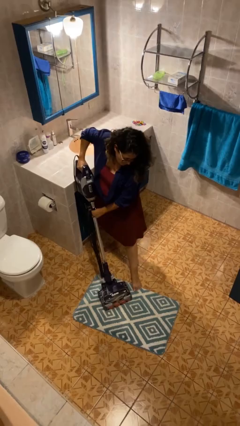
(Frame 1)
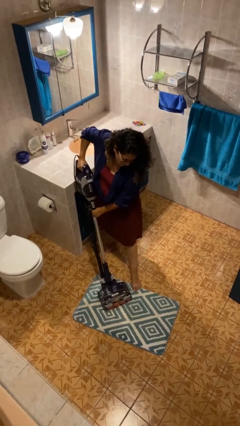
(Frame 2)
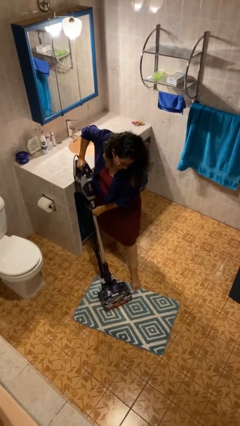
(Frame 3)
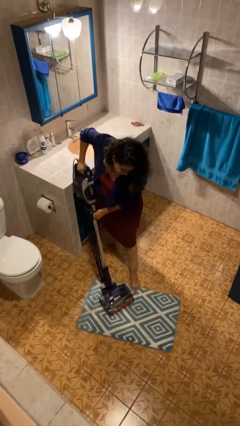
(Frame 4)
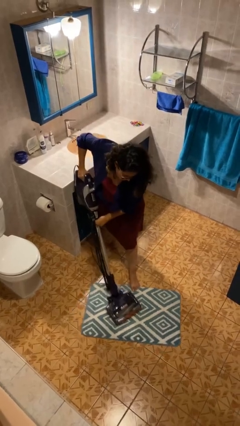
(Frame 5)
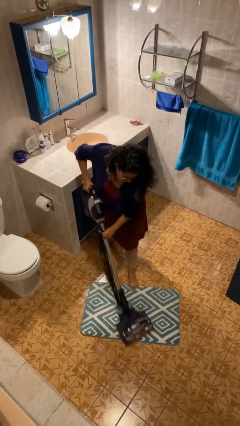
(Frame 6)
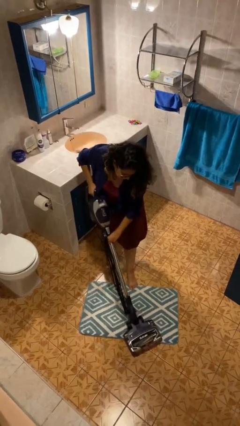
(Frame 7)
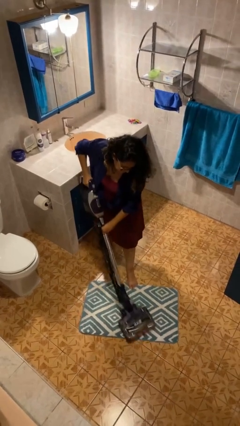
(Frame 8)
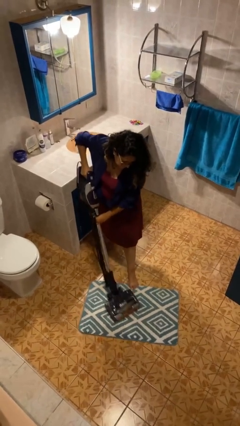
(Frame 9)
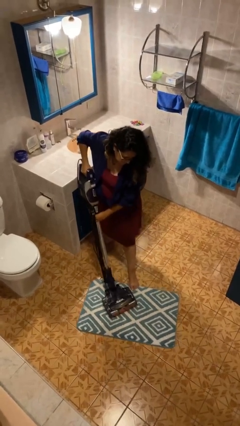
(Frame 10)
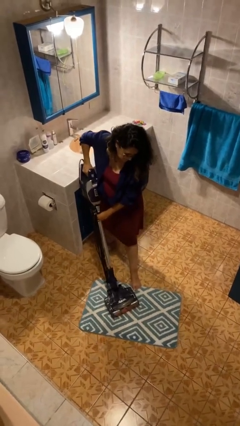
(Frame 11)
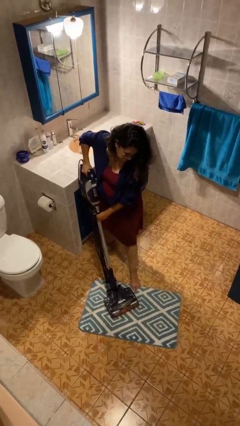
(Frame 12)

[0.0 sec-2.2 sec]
person vacuums carpet

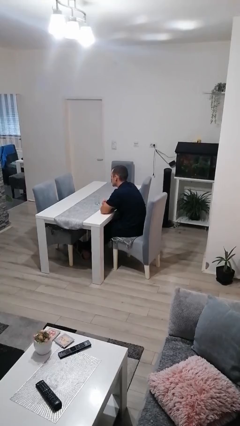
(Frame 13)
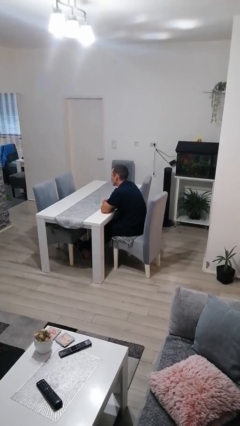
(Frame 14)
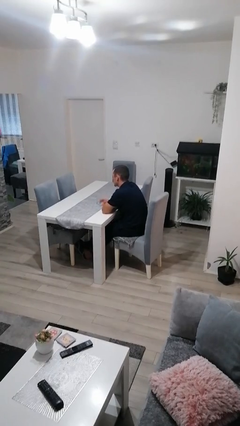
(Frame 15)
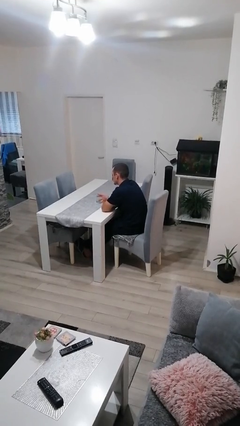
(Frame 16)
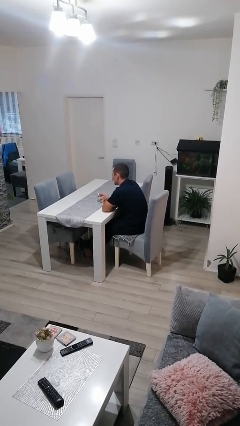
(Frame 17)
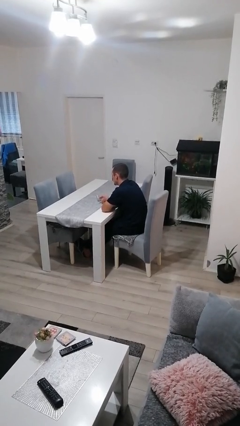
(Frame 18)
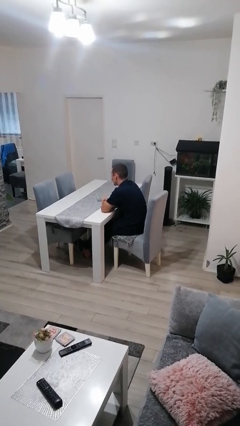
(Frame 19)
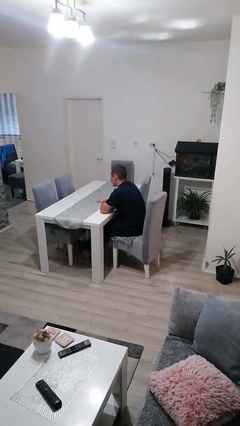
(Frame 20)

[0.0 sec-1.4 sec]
person knocks over glass

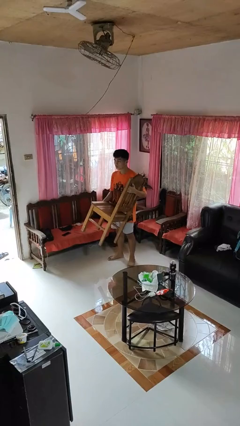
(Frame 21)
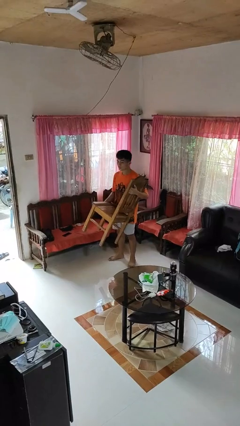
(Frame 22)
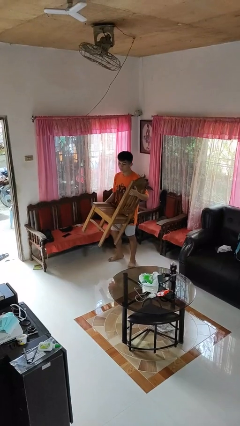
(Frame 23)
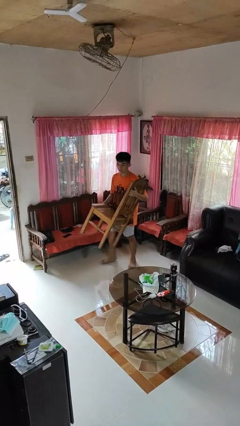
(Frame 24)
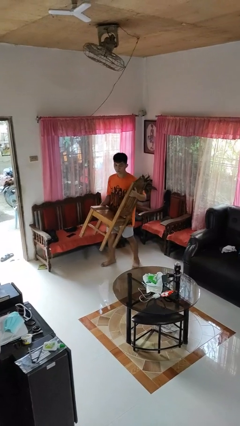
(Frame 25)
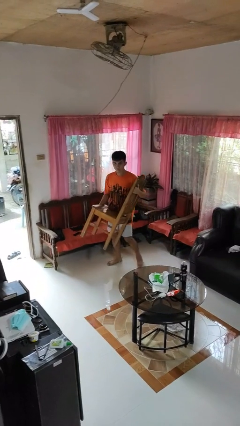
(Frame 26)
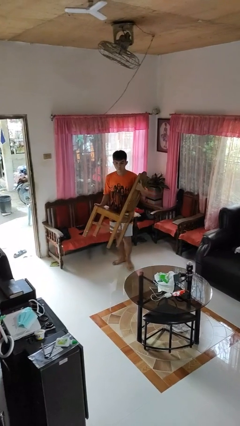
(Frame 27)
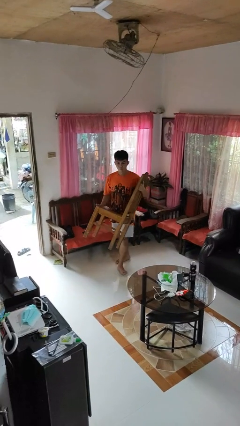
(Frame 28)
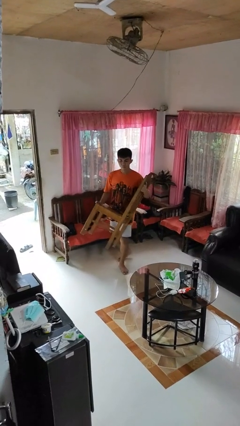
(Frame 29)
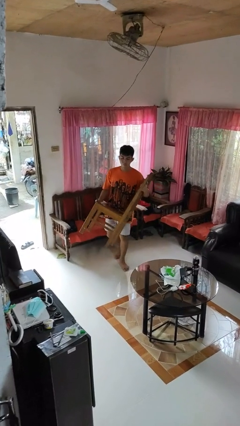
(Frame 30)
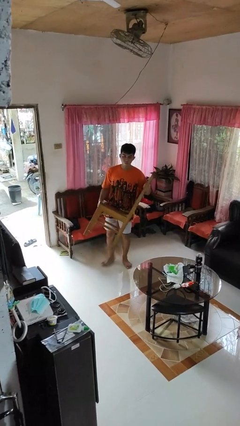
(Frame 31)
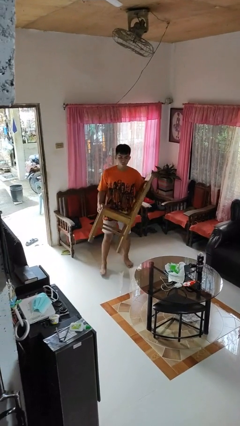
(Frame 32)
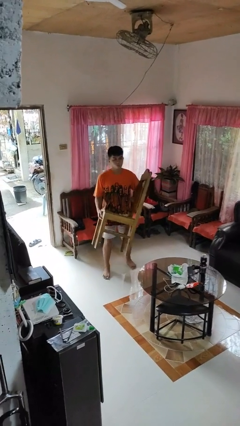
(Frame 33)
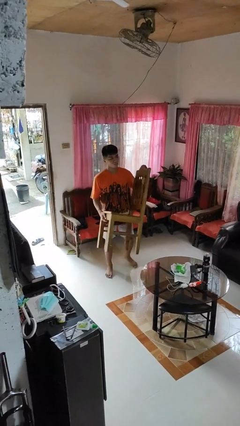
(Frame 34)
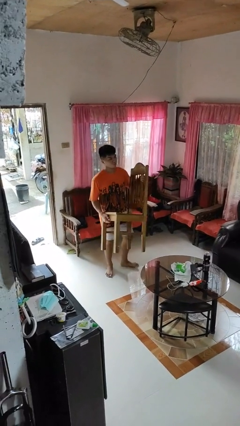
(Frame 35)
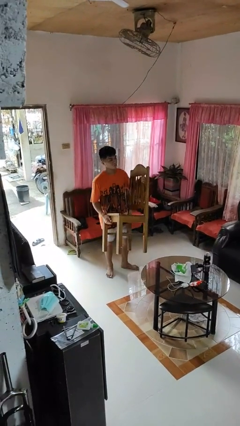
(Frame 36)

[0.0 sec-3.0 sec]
person carries furniture

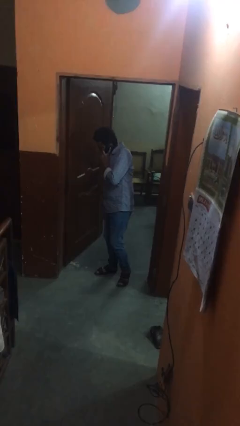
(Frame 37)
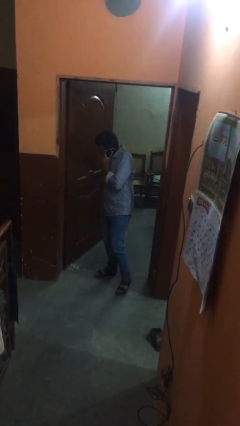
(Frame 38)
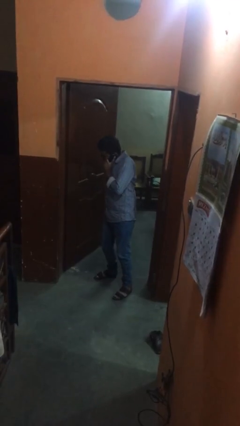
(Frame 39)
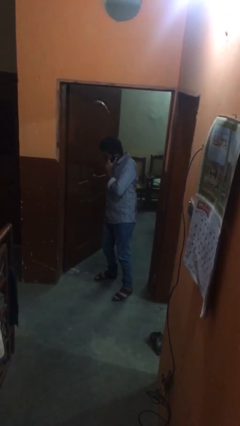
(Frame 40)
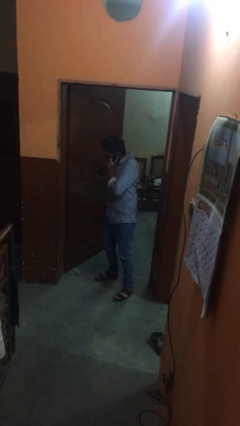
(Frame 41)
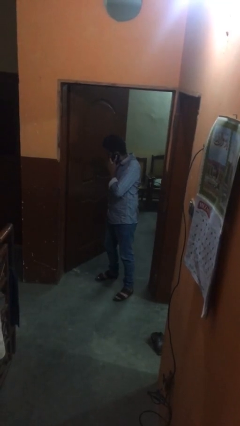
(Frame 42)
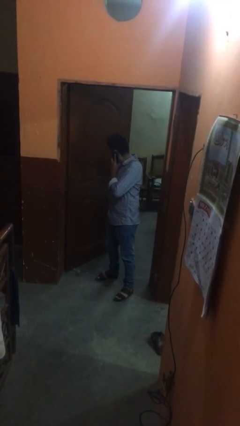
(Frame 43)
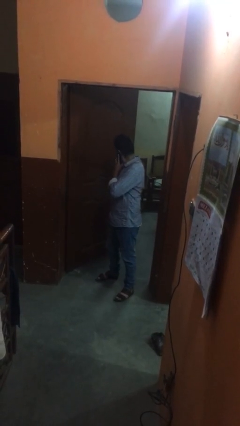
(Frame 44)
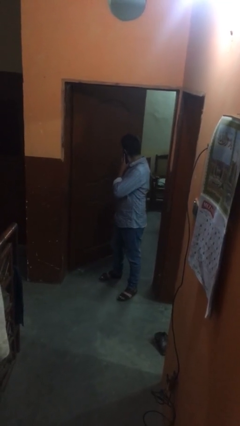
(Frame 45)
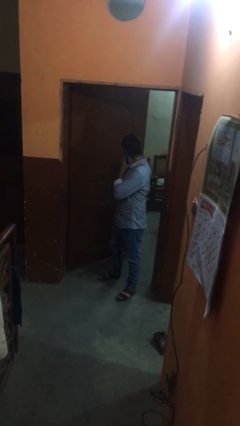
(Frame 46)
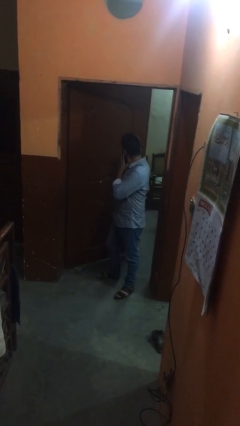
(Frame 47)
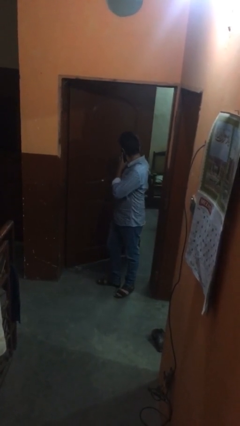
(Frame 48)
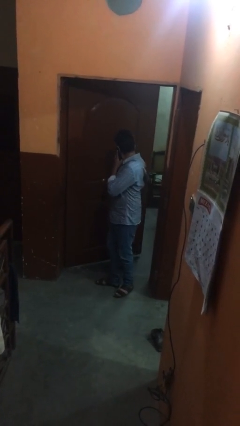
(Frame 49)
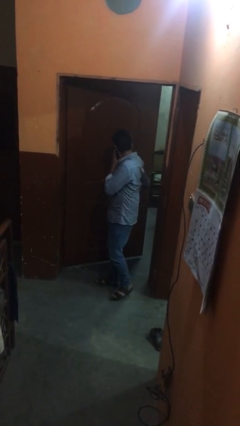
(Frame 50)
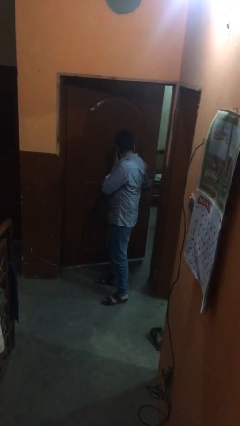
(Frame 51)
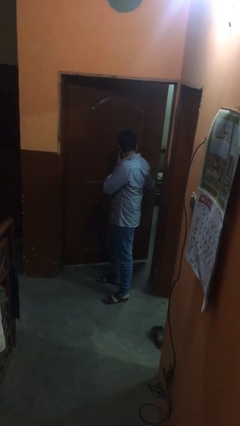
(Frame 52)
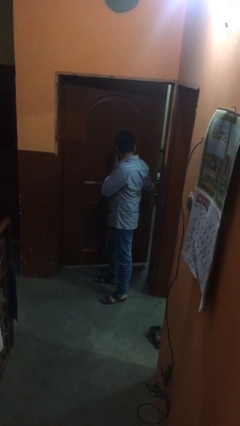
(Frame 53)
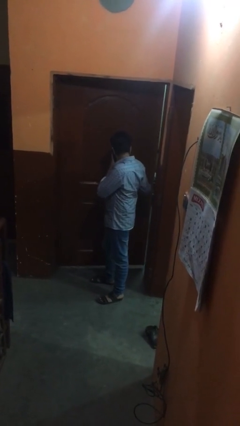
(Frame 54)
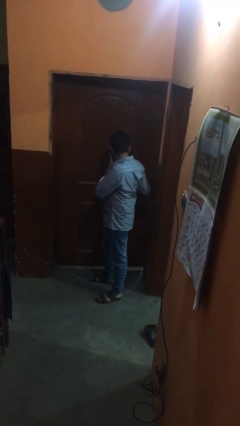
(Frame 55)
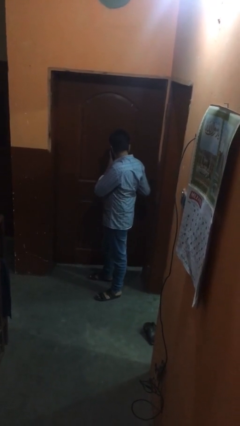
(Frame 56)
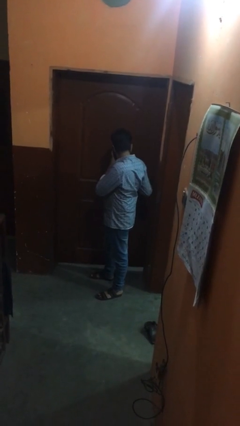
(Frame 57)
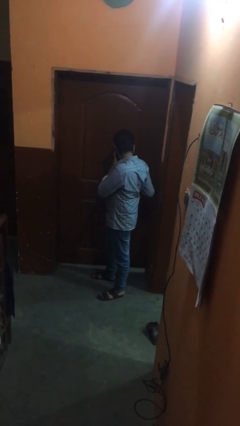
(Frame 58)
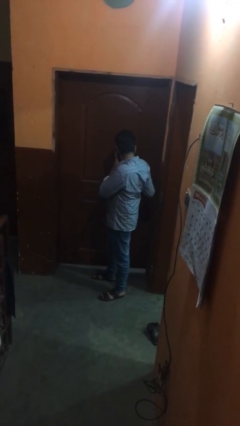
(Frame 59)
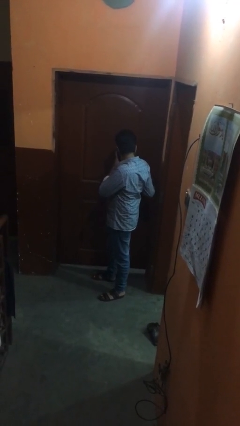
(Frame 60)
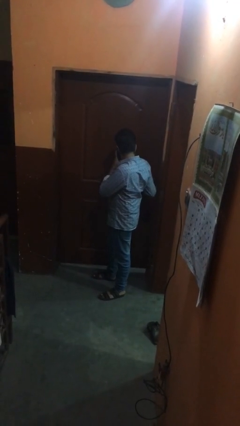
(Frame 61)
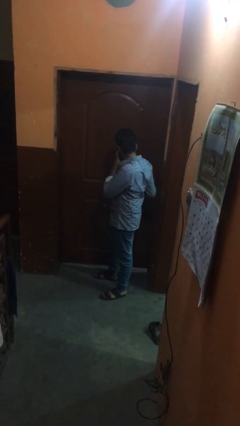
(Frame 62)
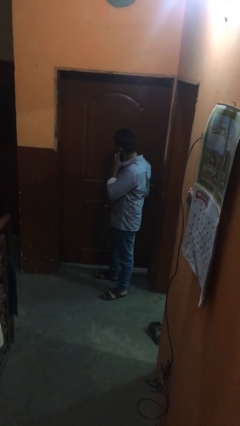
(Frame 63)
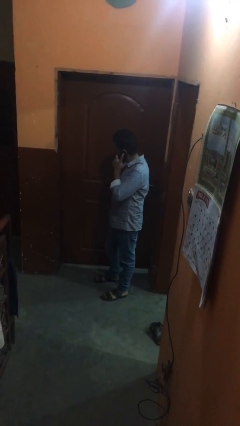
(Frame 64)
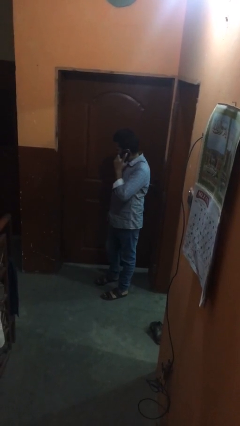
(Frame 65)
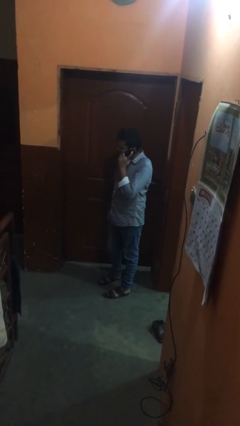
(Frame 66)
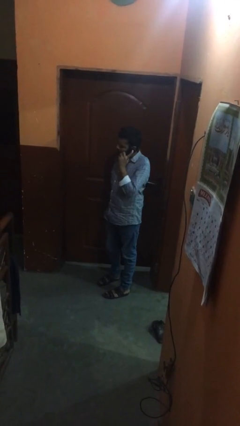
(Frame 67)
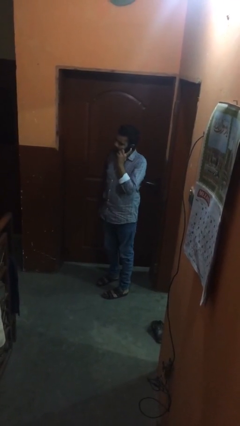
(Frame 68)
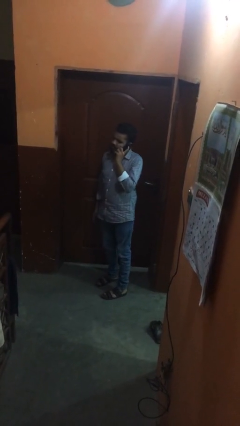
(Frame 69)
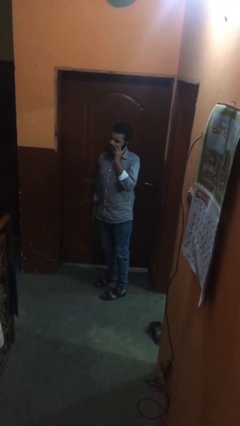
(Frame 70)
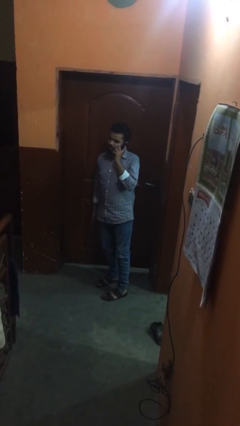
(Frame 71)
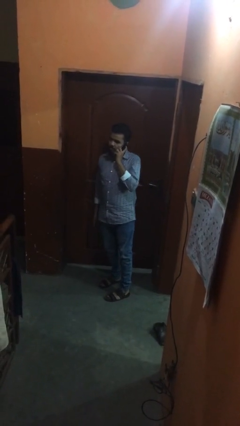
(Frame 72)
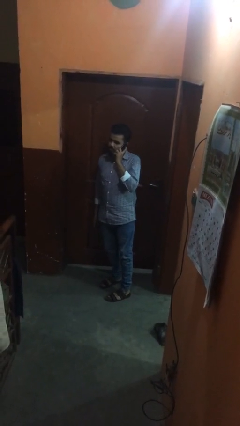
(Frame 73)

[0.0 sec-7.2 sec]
person closes facility door

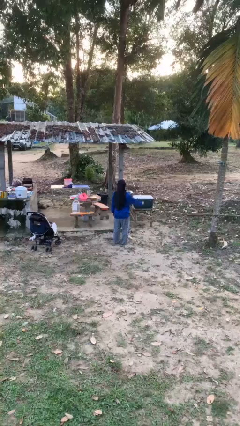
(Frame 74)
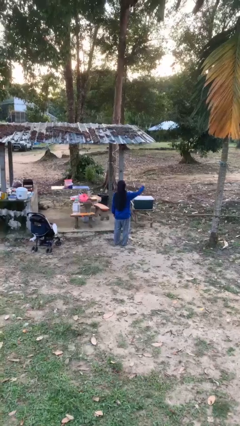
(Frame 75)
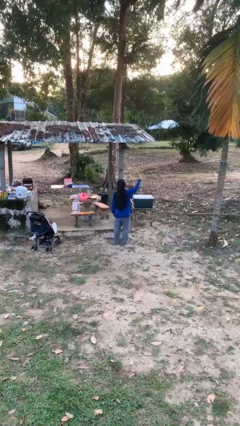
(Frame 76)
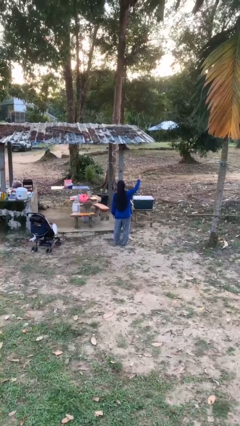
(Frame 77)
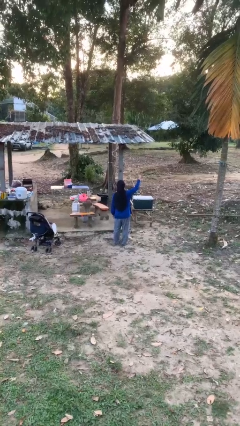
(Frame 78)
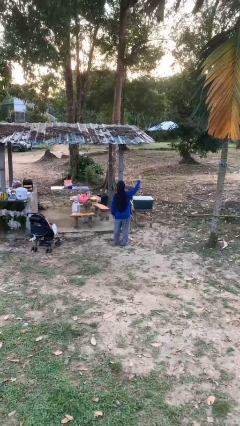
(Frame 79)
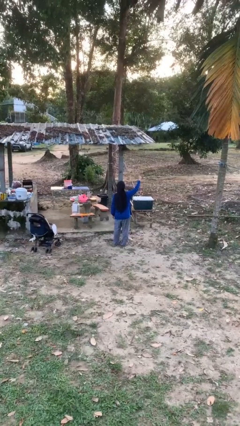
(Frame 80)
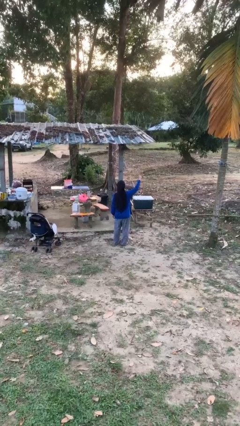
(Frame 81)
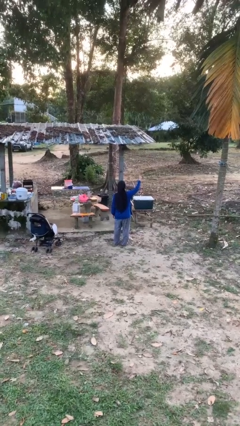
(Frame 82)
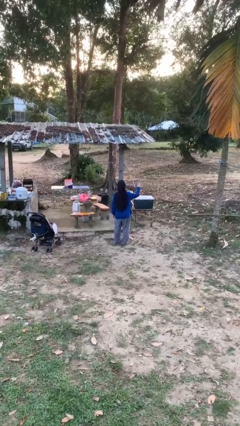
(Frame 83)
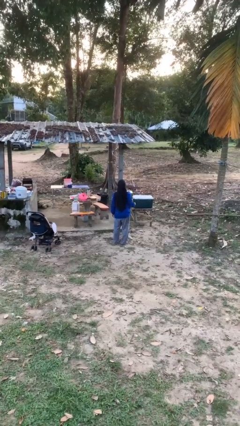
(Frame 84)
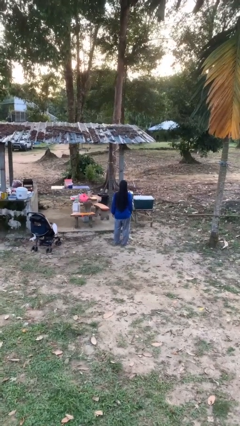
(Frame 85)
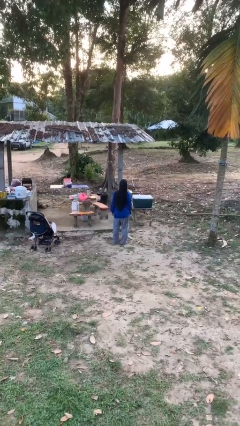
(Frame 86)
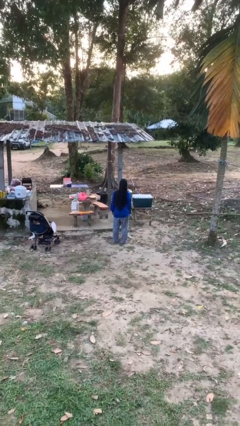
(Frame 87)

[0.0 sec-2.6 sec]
person gestures number three

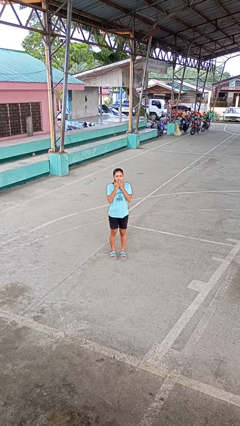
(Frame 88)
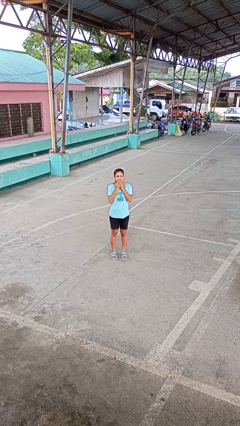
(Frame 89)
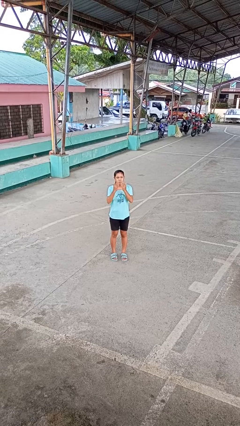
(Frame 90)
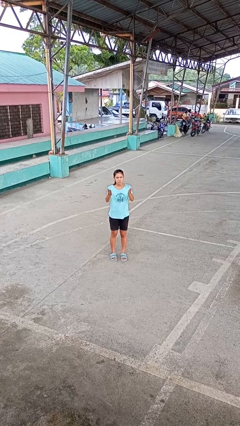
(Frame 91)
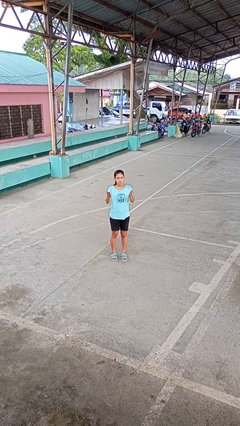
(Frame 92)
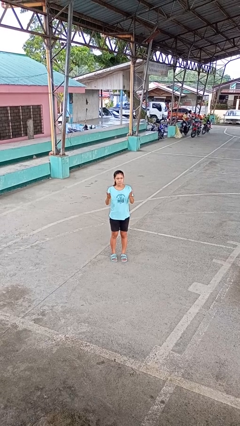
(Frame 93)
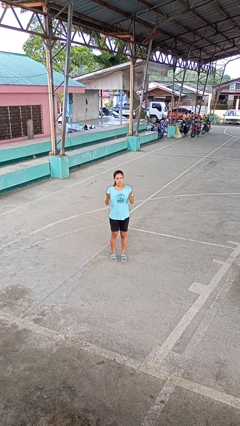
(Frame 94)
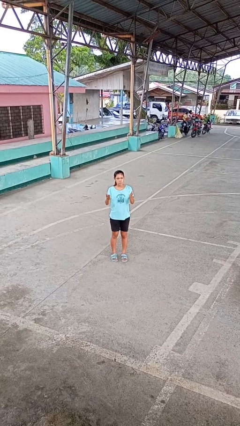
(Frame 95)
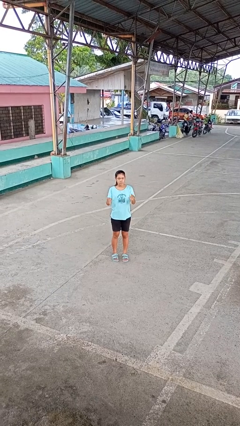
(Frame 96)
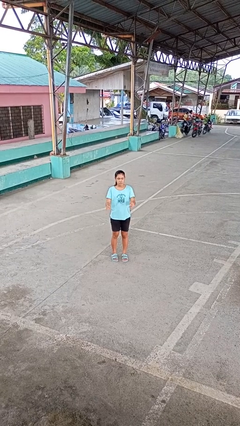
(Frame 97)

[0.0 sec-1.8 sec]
person gestures blow kiss
